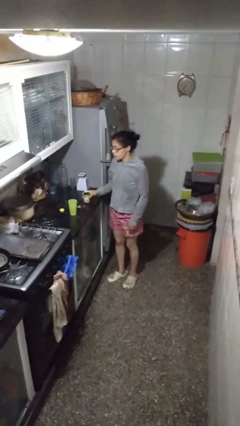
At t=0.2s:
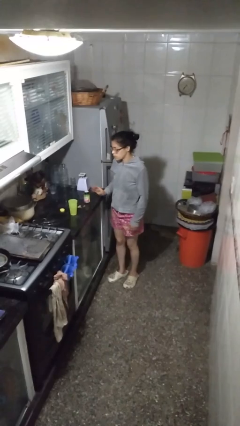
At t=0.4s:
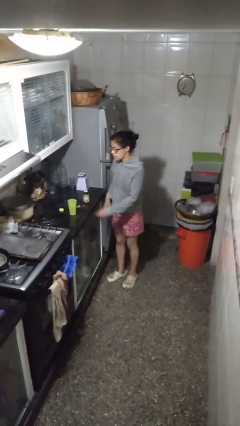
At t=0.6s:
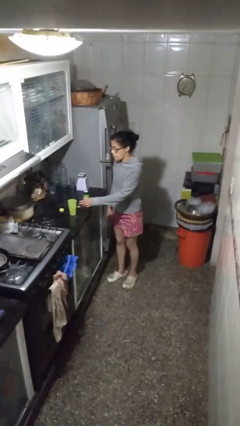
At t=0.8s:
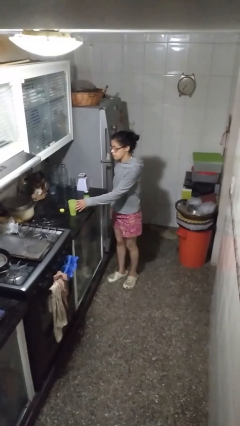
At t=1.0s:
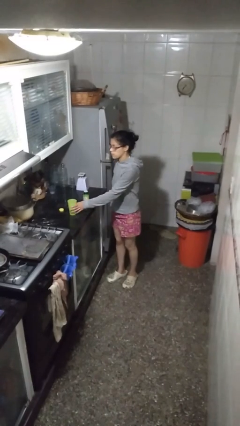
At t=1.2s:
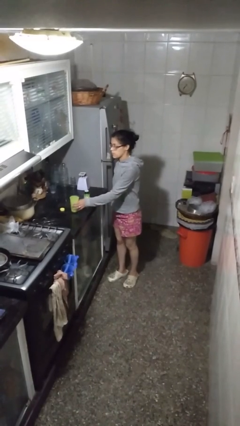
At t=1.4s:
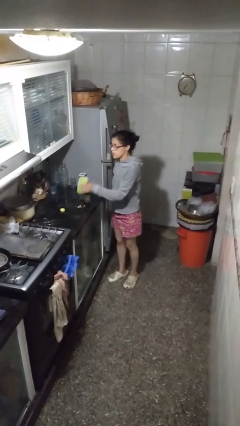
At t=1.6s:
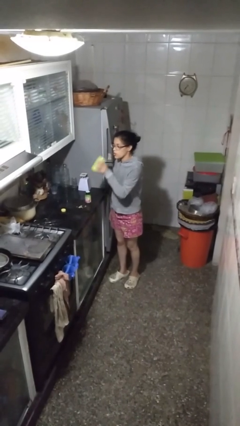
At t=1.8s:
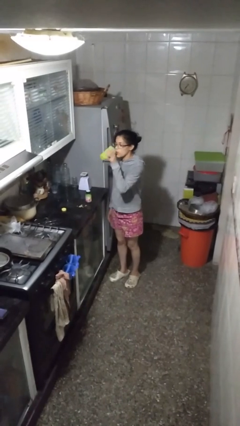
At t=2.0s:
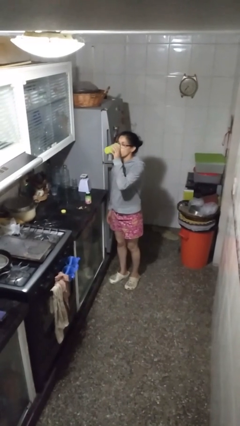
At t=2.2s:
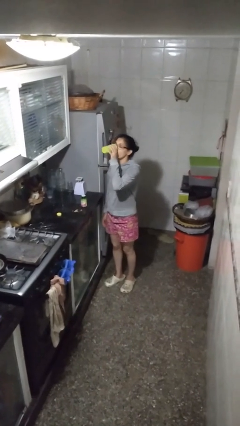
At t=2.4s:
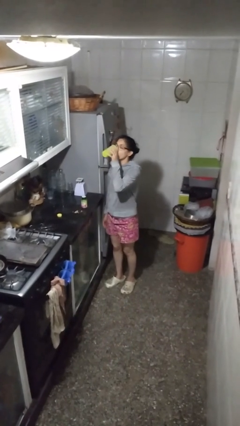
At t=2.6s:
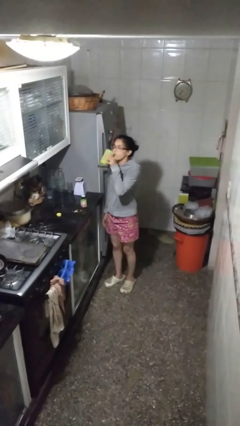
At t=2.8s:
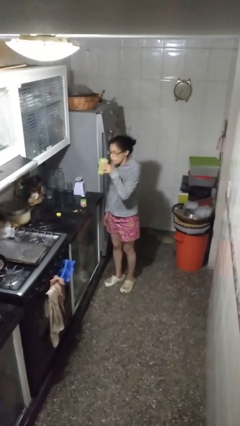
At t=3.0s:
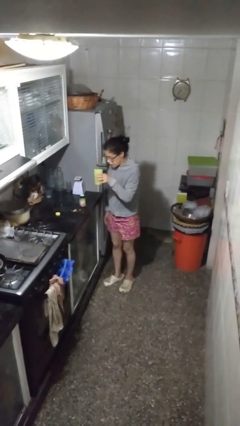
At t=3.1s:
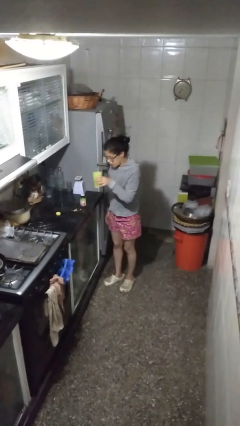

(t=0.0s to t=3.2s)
person drinks from cup

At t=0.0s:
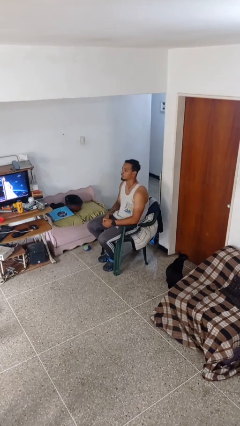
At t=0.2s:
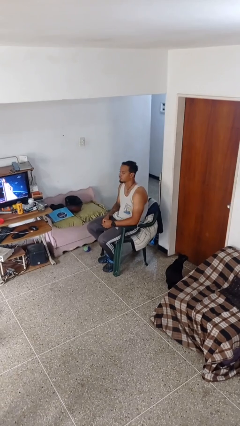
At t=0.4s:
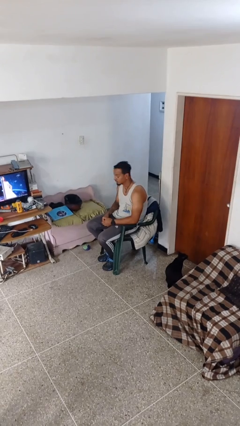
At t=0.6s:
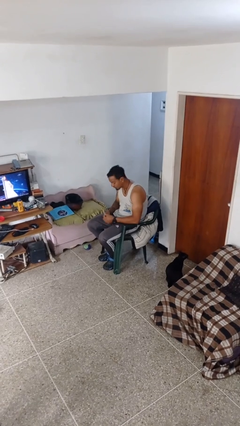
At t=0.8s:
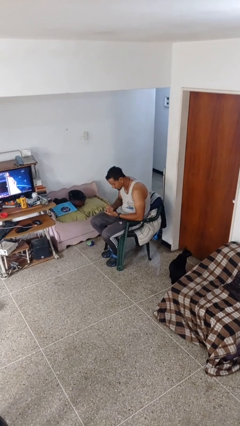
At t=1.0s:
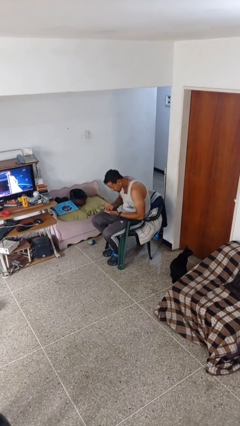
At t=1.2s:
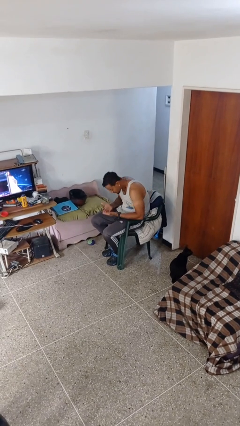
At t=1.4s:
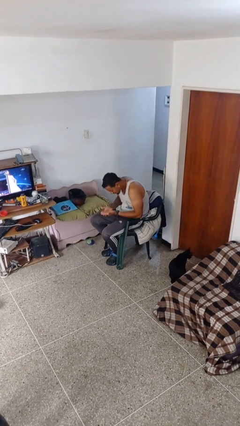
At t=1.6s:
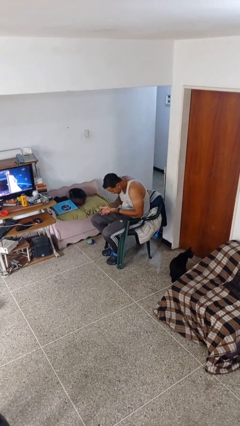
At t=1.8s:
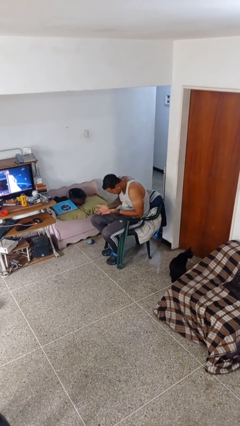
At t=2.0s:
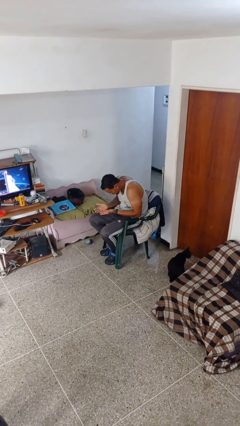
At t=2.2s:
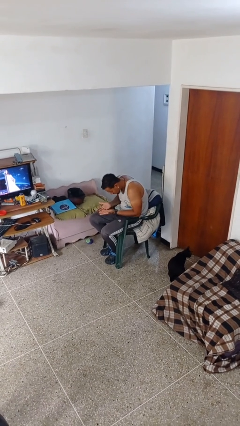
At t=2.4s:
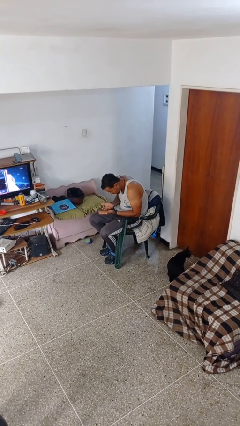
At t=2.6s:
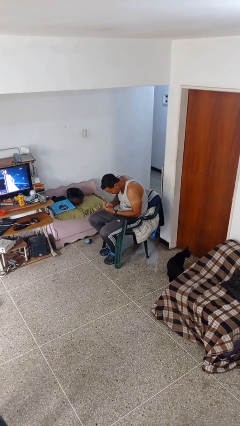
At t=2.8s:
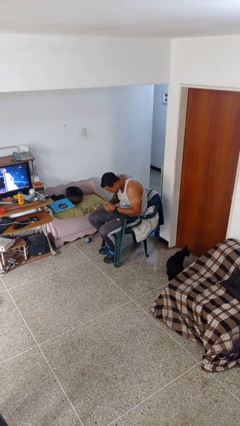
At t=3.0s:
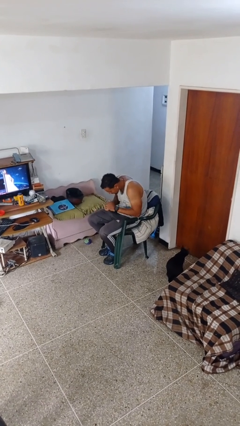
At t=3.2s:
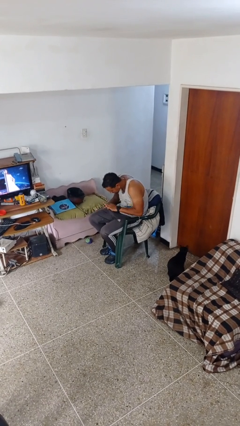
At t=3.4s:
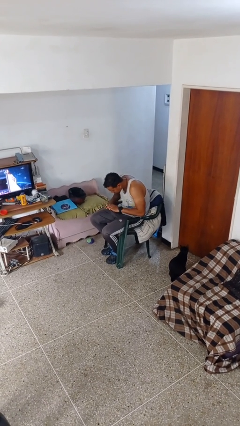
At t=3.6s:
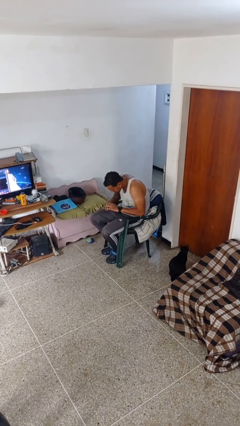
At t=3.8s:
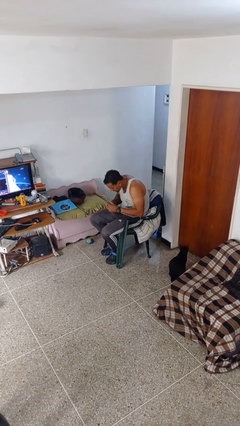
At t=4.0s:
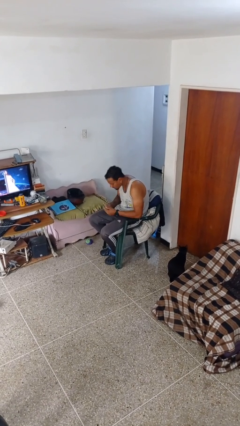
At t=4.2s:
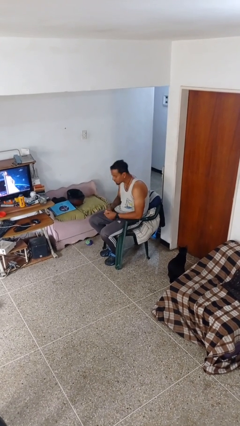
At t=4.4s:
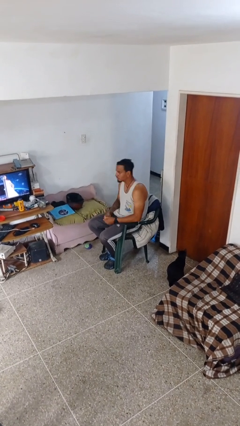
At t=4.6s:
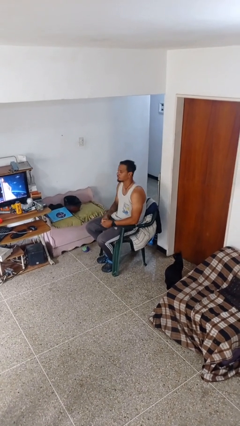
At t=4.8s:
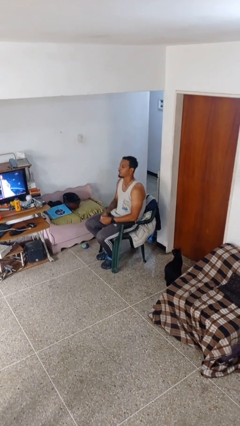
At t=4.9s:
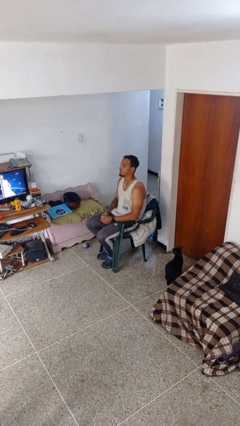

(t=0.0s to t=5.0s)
person looks at hands in lap

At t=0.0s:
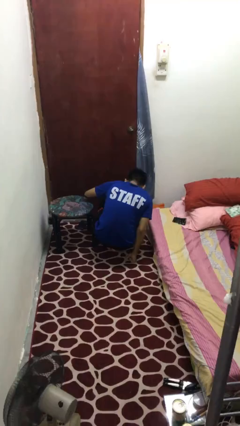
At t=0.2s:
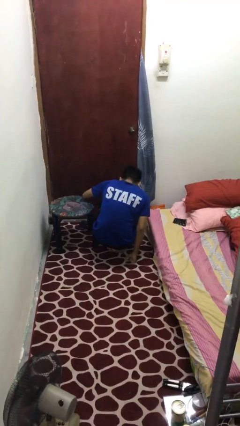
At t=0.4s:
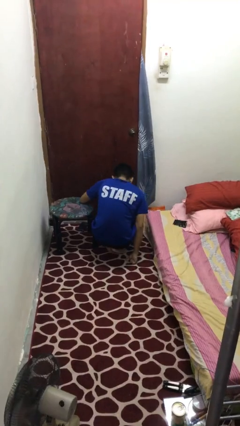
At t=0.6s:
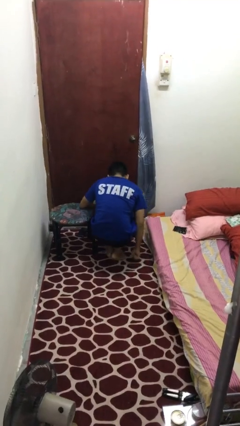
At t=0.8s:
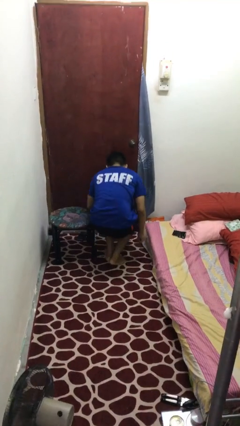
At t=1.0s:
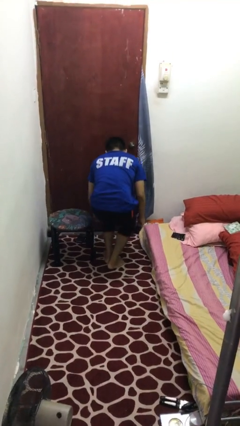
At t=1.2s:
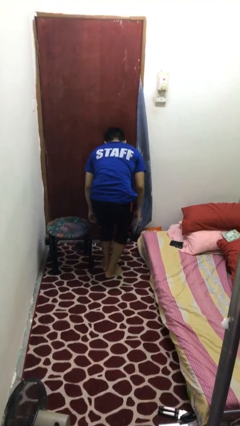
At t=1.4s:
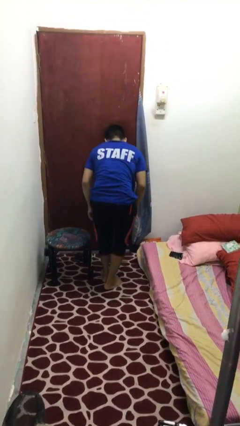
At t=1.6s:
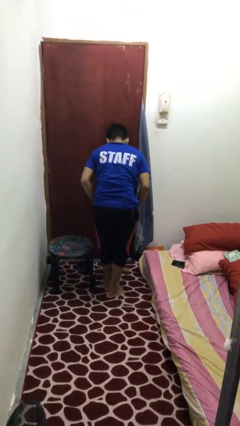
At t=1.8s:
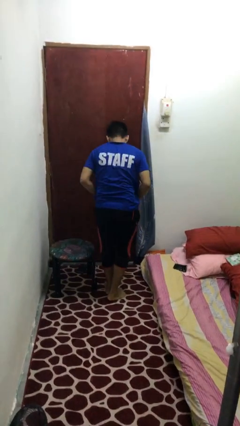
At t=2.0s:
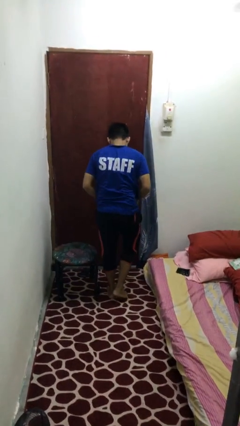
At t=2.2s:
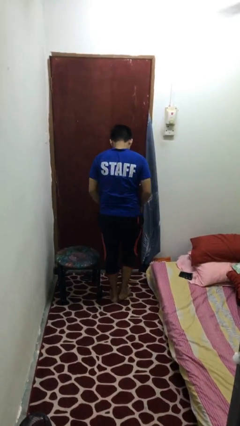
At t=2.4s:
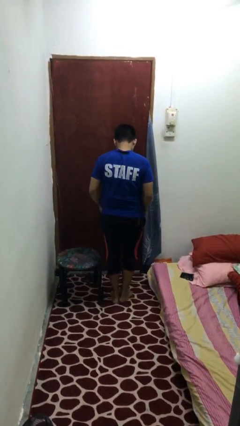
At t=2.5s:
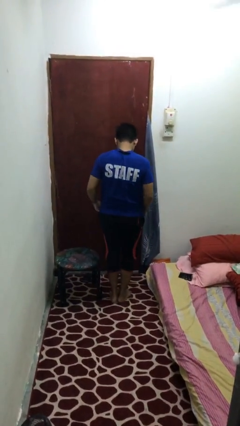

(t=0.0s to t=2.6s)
person stands up from floor

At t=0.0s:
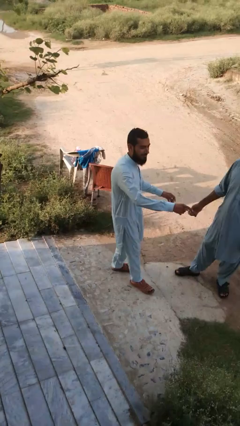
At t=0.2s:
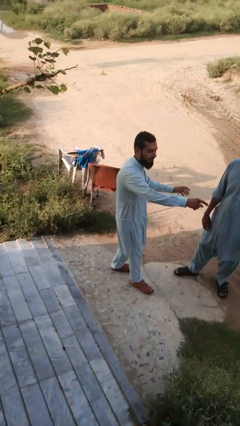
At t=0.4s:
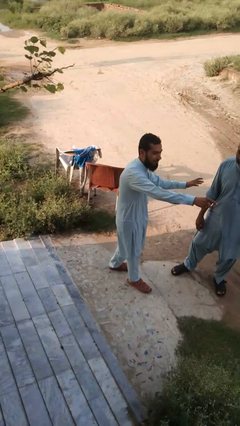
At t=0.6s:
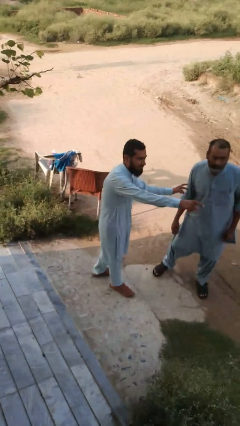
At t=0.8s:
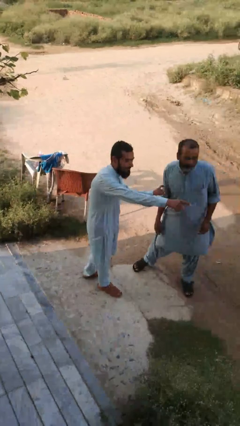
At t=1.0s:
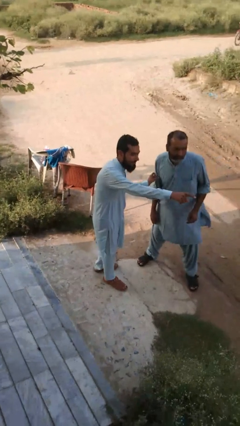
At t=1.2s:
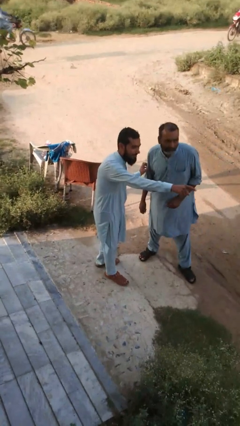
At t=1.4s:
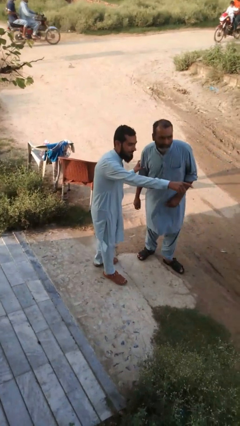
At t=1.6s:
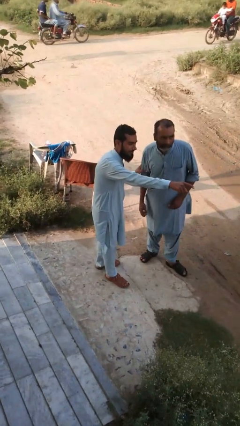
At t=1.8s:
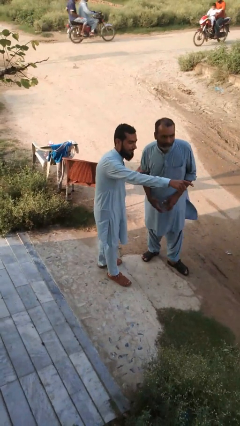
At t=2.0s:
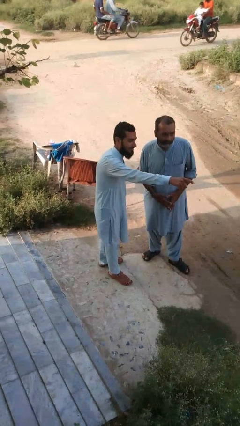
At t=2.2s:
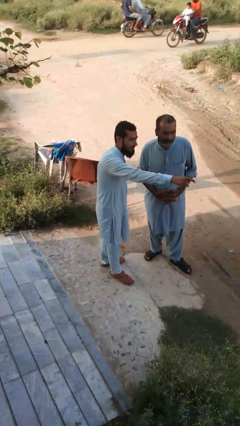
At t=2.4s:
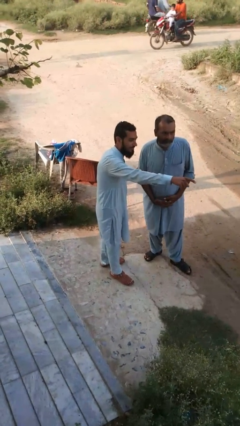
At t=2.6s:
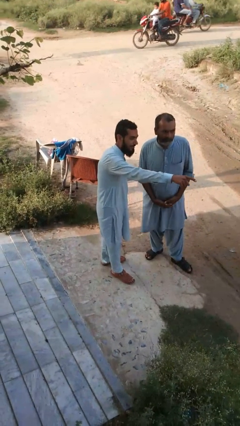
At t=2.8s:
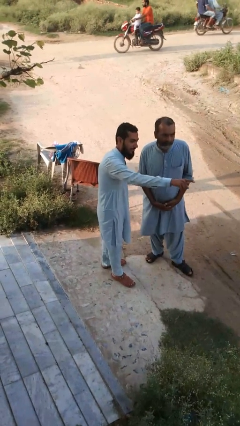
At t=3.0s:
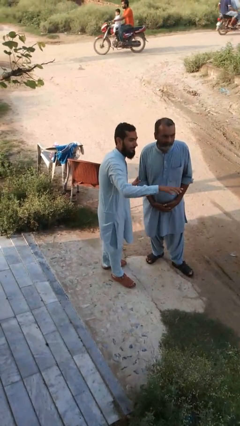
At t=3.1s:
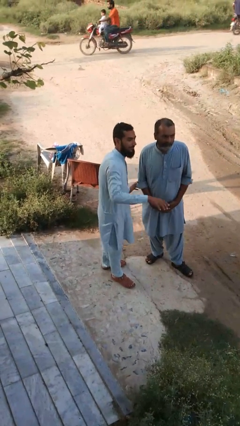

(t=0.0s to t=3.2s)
person points at person

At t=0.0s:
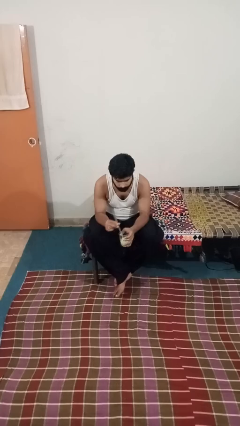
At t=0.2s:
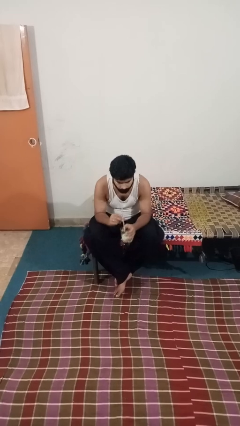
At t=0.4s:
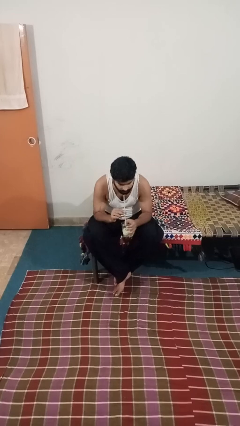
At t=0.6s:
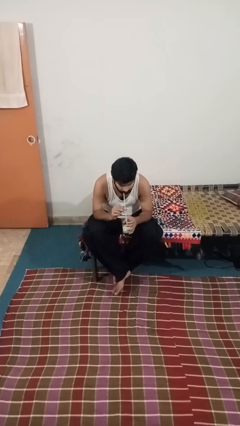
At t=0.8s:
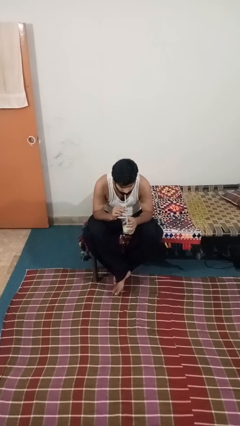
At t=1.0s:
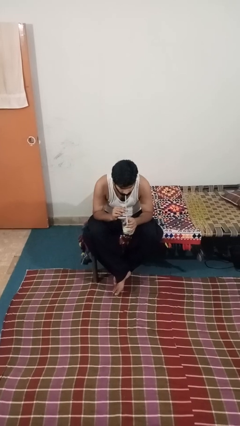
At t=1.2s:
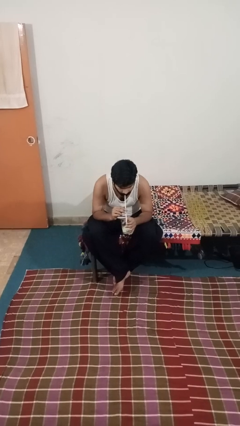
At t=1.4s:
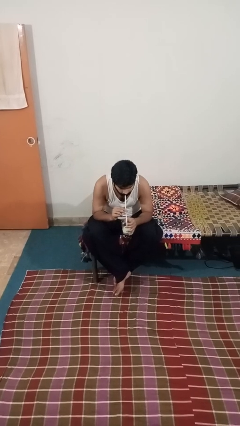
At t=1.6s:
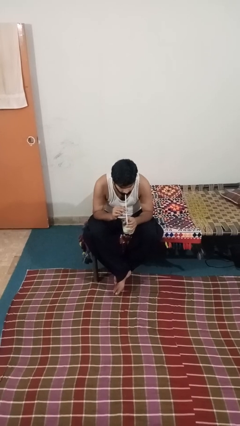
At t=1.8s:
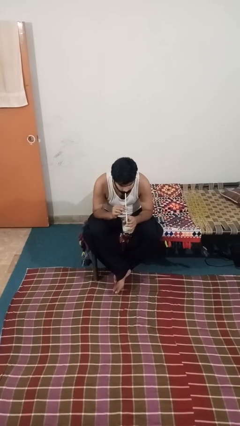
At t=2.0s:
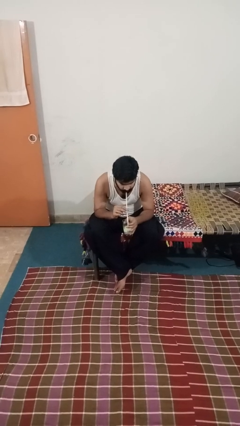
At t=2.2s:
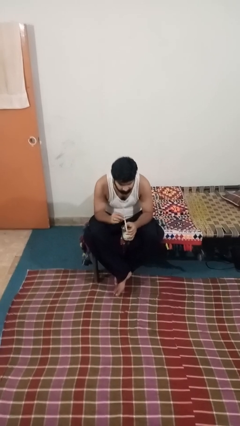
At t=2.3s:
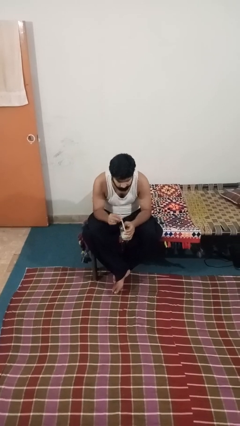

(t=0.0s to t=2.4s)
person drinks from straw

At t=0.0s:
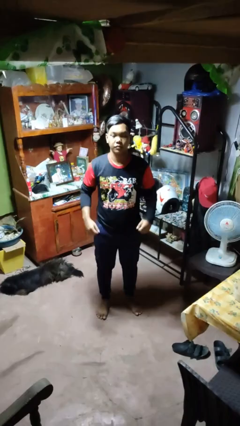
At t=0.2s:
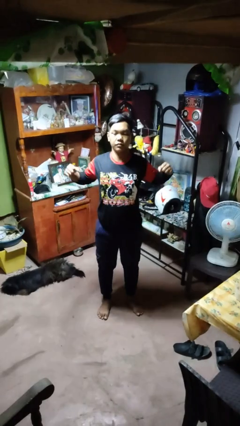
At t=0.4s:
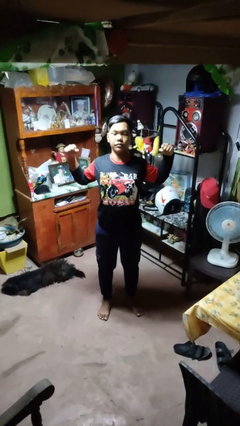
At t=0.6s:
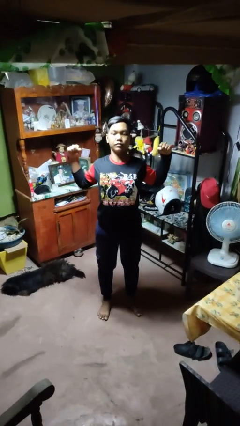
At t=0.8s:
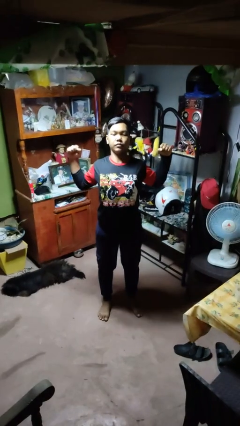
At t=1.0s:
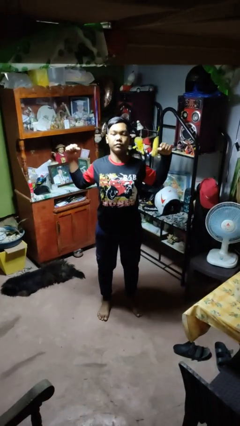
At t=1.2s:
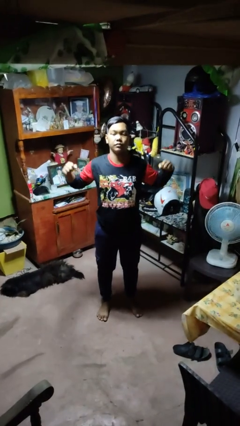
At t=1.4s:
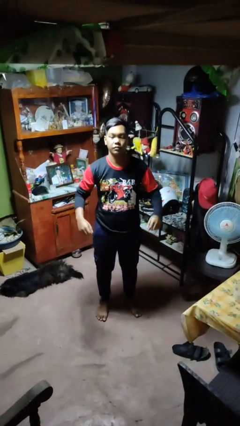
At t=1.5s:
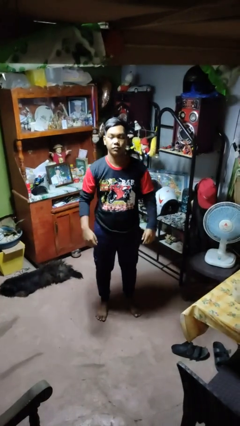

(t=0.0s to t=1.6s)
person stretches arms to side
